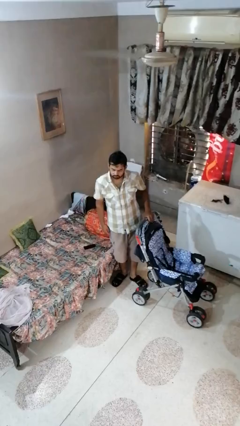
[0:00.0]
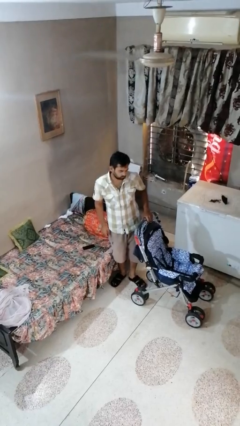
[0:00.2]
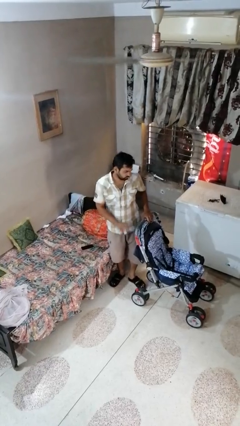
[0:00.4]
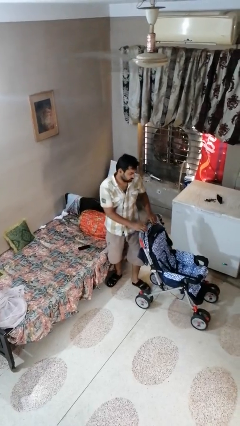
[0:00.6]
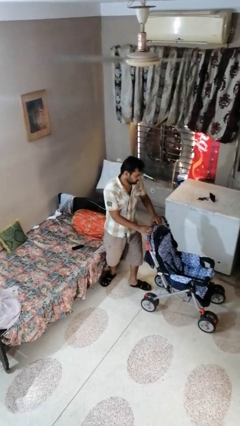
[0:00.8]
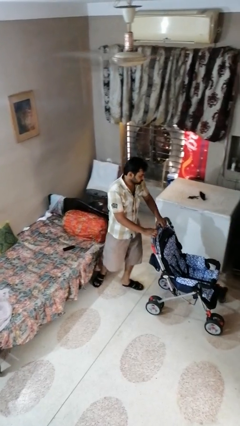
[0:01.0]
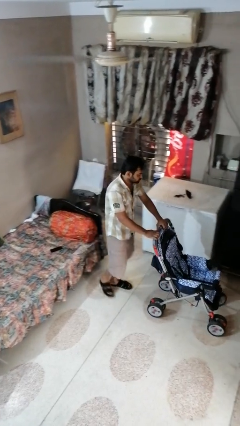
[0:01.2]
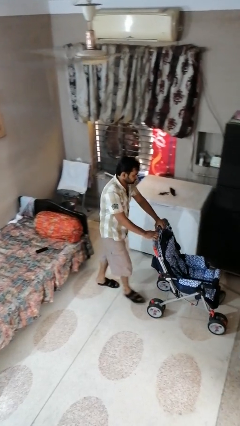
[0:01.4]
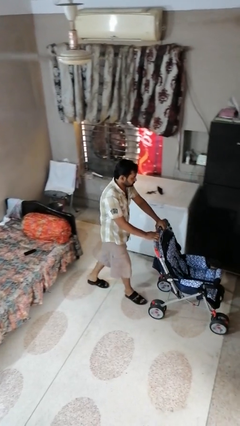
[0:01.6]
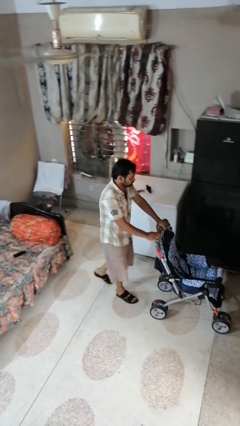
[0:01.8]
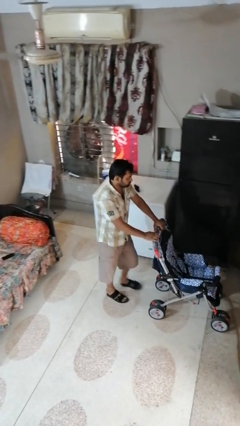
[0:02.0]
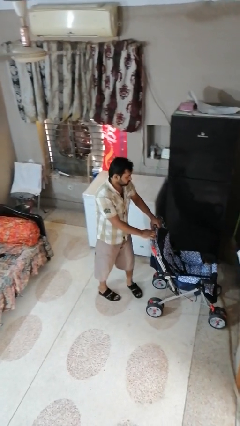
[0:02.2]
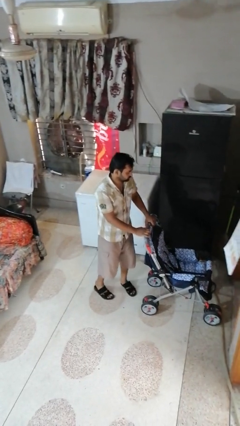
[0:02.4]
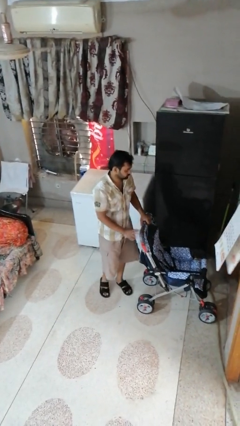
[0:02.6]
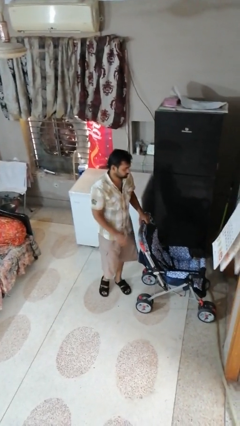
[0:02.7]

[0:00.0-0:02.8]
person pushes wheeled cart

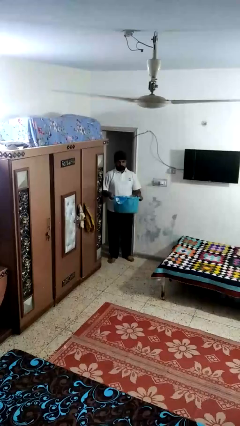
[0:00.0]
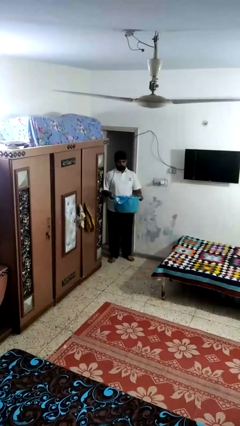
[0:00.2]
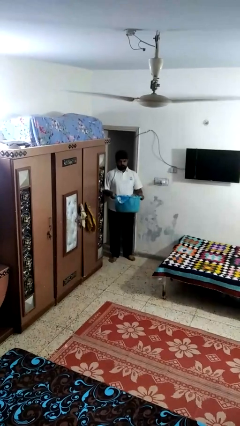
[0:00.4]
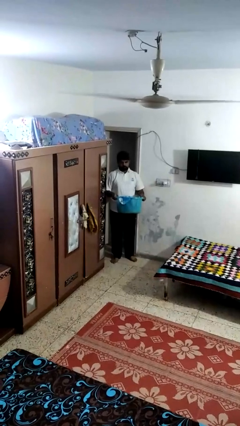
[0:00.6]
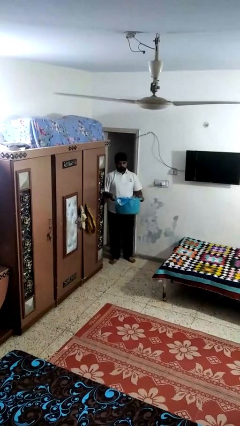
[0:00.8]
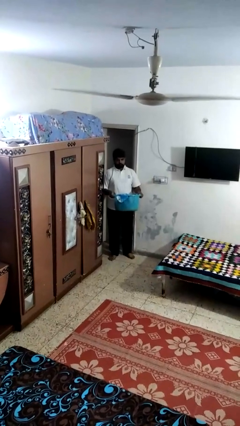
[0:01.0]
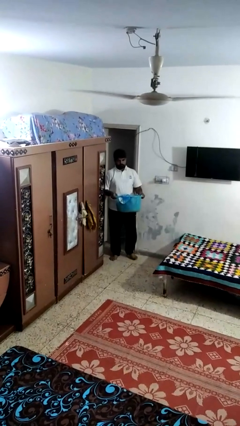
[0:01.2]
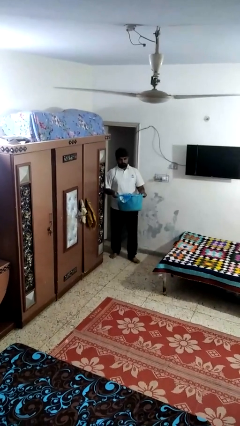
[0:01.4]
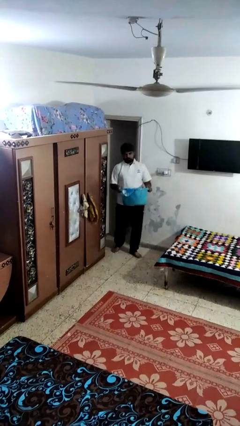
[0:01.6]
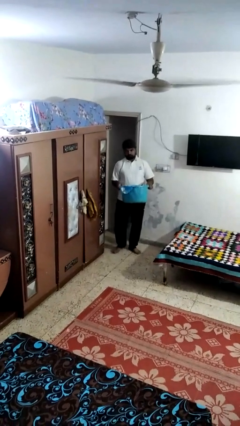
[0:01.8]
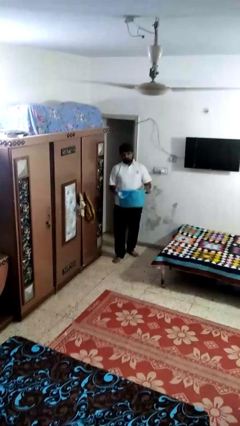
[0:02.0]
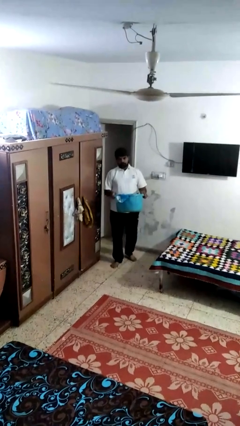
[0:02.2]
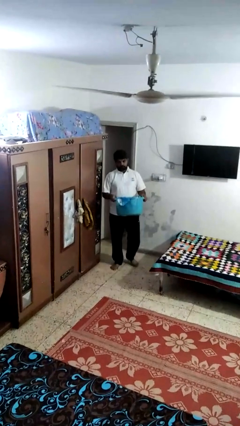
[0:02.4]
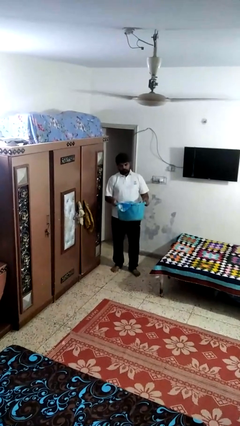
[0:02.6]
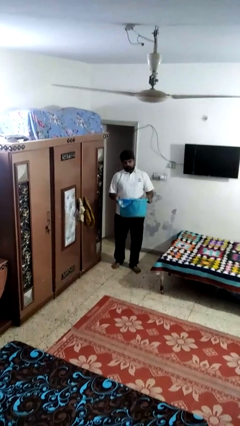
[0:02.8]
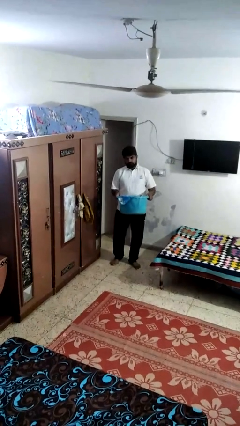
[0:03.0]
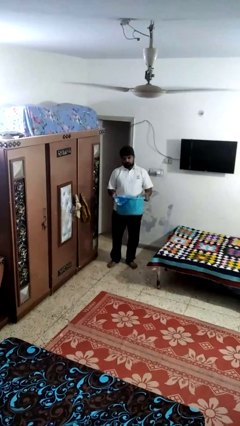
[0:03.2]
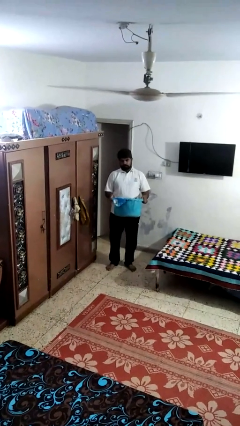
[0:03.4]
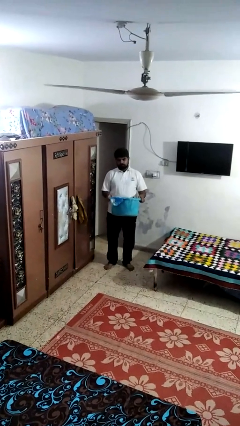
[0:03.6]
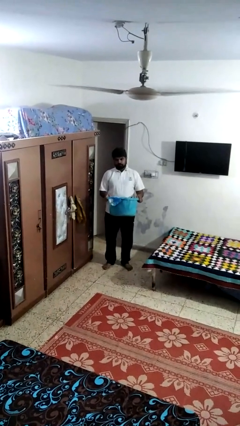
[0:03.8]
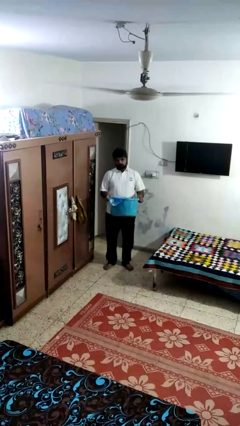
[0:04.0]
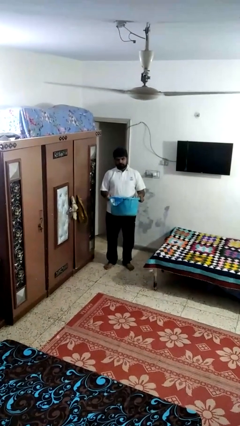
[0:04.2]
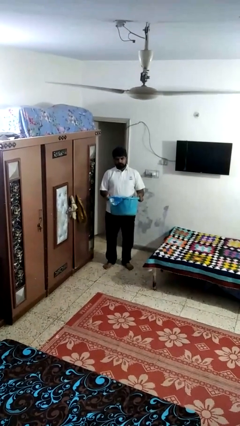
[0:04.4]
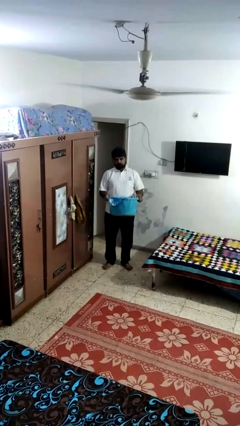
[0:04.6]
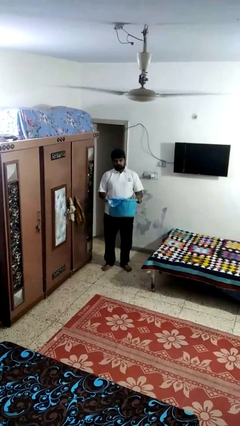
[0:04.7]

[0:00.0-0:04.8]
person carries laundry basket

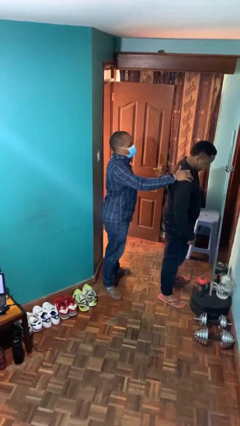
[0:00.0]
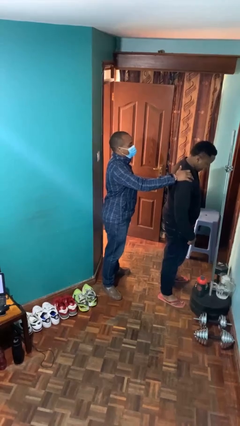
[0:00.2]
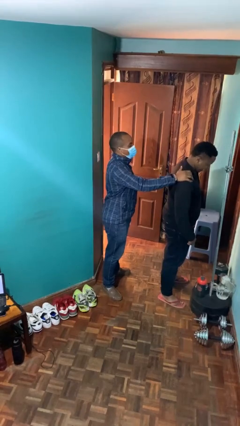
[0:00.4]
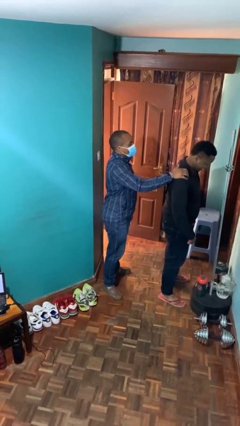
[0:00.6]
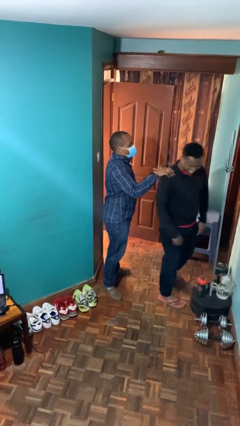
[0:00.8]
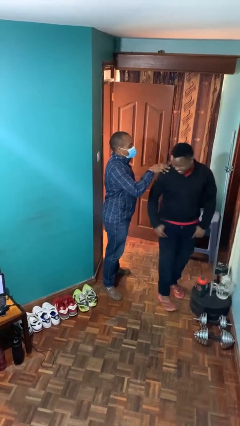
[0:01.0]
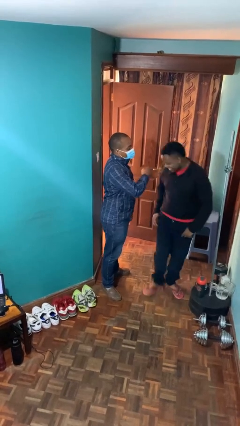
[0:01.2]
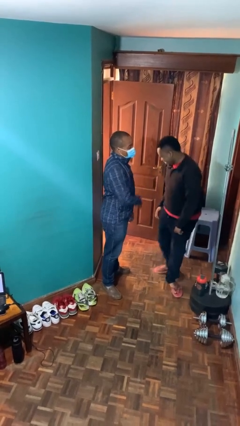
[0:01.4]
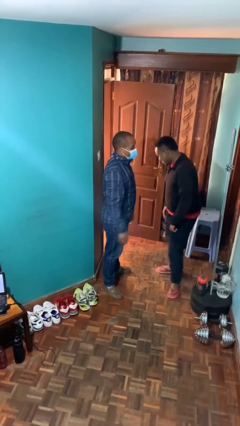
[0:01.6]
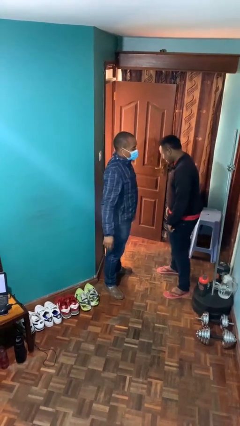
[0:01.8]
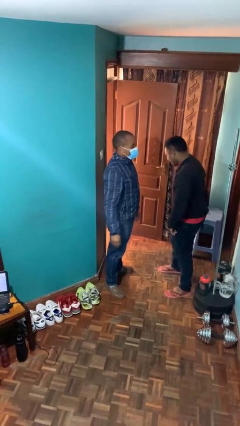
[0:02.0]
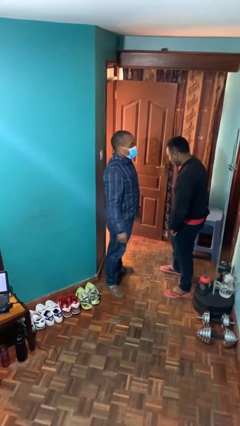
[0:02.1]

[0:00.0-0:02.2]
person spins person around

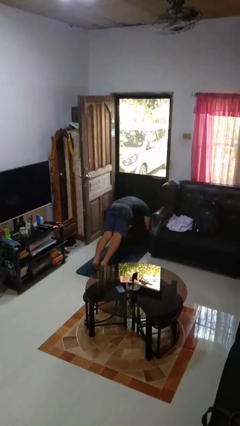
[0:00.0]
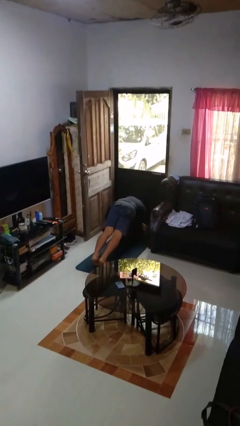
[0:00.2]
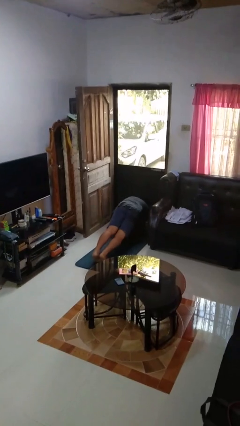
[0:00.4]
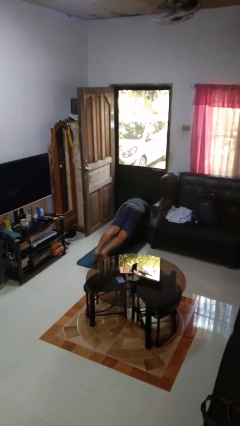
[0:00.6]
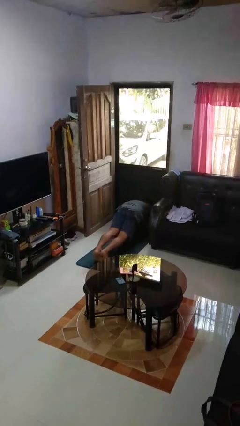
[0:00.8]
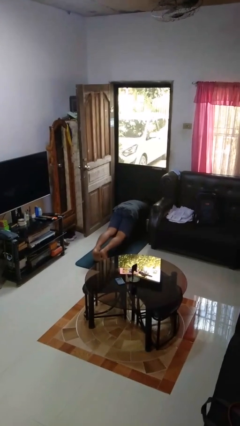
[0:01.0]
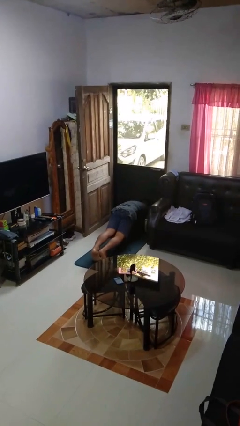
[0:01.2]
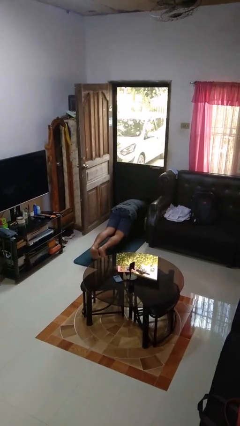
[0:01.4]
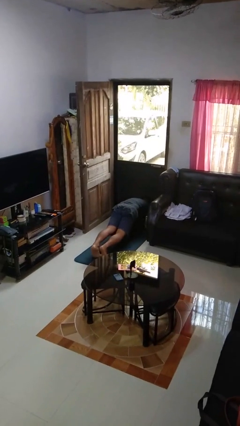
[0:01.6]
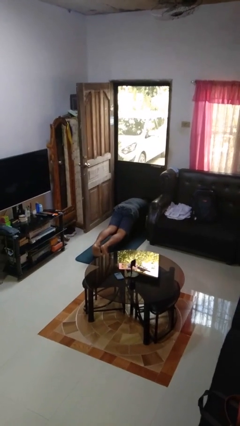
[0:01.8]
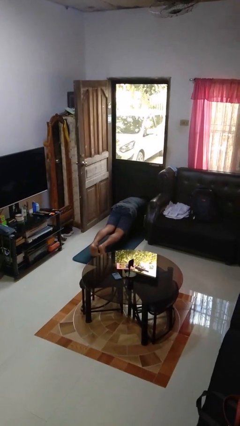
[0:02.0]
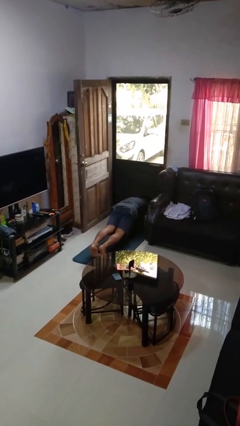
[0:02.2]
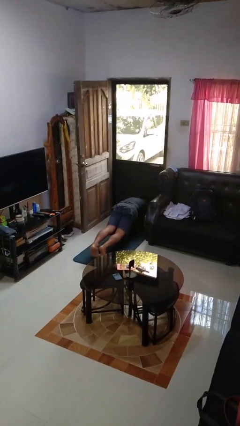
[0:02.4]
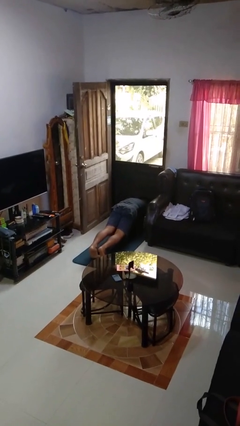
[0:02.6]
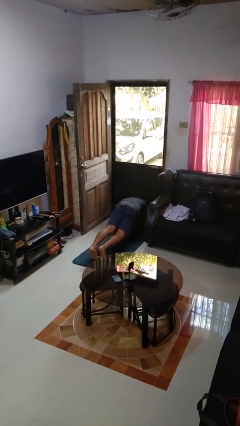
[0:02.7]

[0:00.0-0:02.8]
person exercises with plank

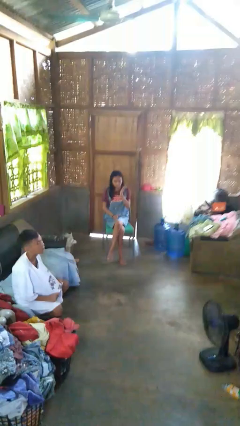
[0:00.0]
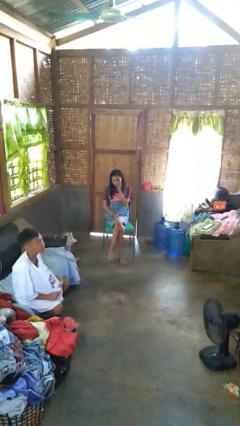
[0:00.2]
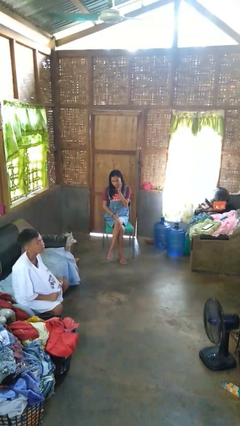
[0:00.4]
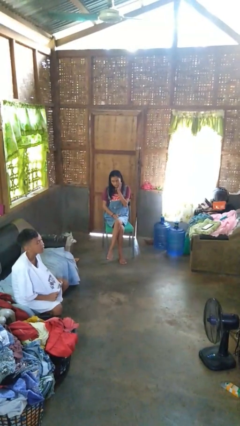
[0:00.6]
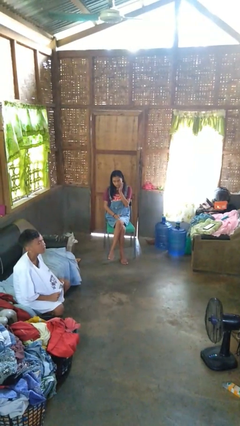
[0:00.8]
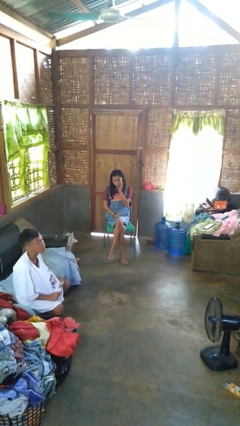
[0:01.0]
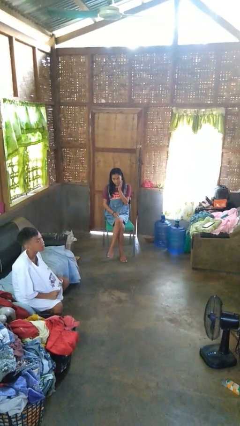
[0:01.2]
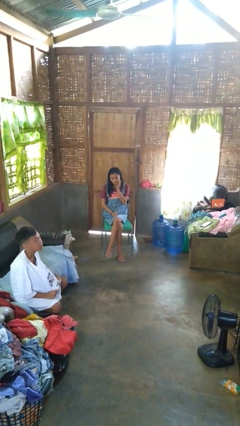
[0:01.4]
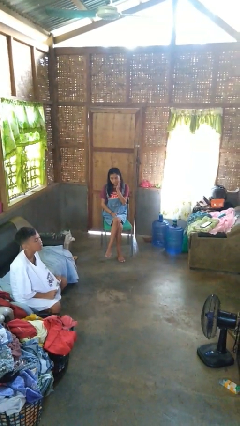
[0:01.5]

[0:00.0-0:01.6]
person swats bug

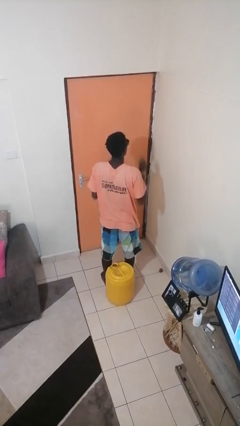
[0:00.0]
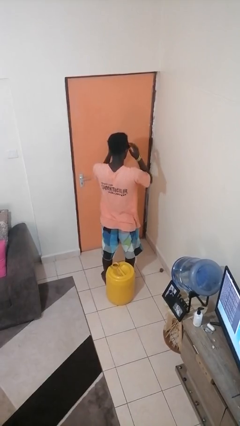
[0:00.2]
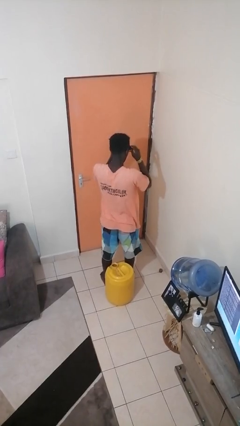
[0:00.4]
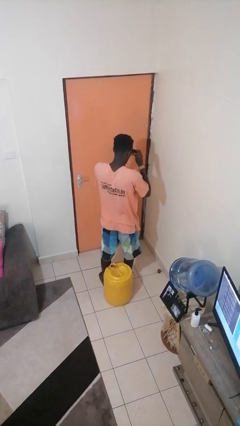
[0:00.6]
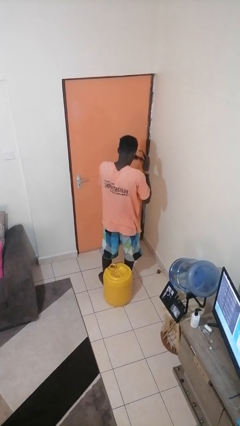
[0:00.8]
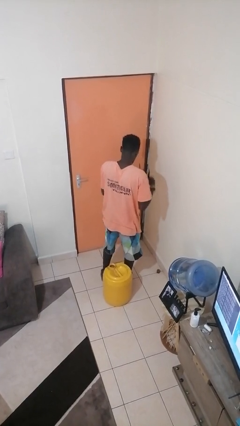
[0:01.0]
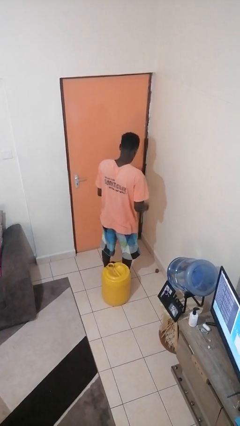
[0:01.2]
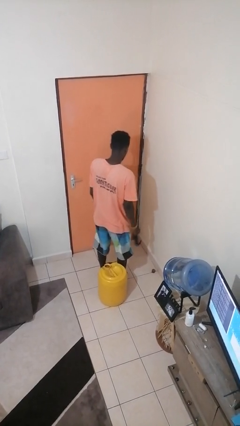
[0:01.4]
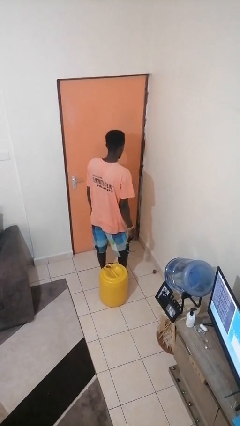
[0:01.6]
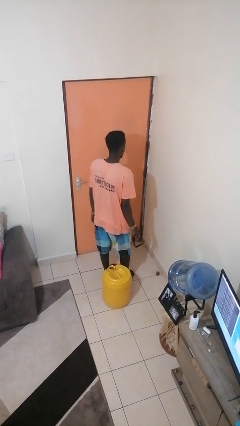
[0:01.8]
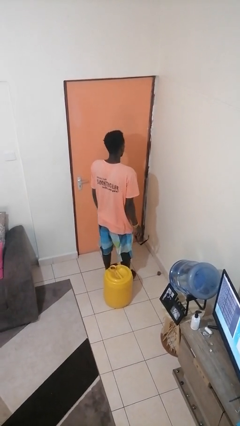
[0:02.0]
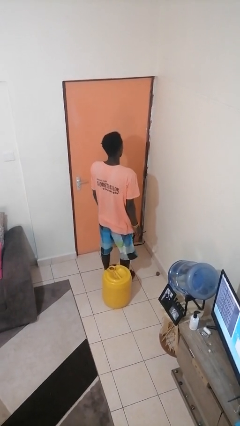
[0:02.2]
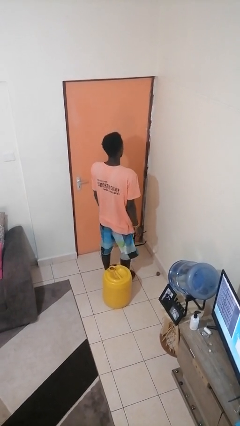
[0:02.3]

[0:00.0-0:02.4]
person takes off sunglasses

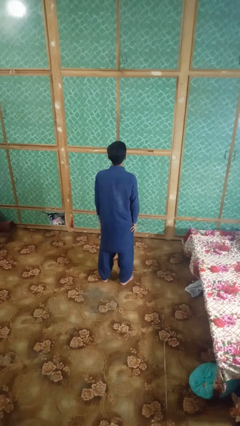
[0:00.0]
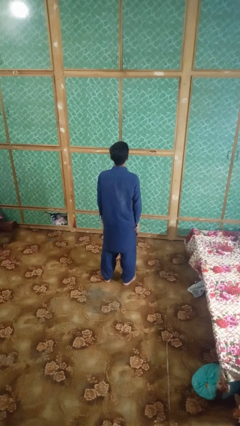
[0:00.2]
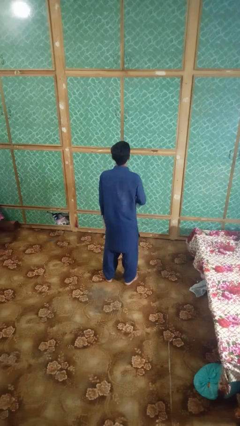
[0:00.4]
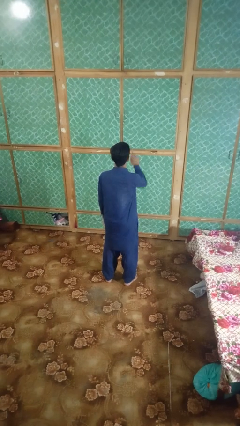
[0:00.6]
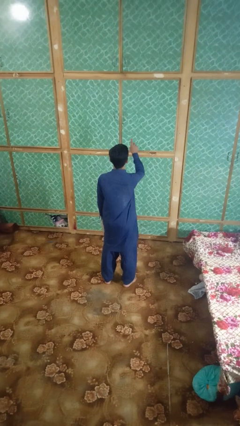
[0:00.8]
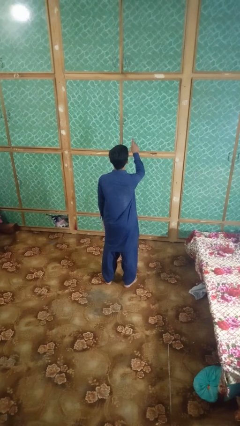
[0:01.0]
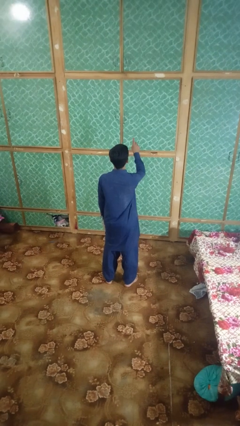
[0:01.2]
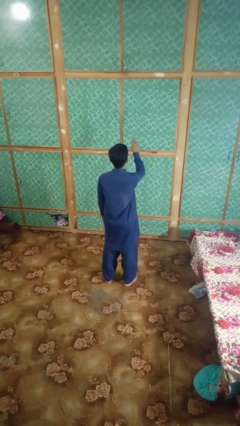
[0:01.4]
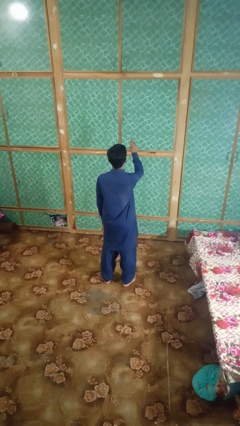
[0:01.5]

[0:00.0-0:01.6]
person gestures number one
